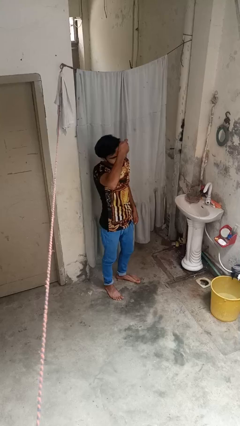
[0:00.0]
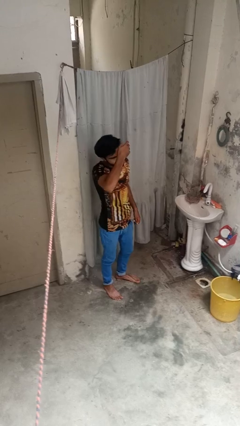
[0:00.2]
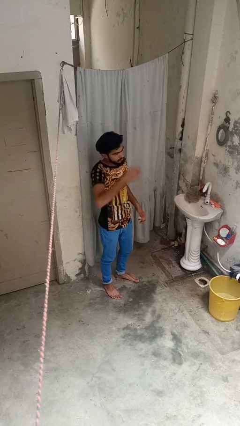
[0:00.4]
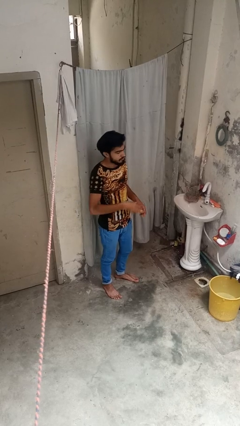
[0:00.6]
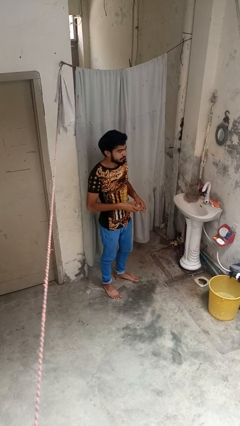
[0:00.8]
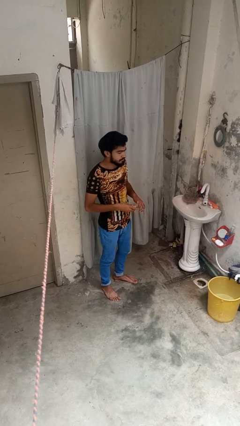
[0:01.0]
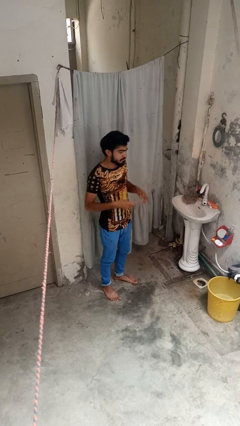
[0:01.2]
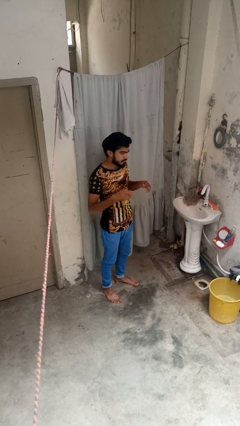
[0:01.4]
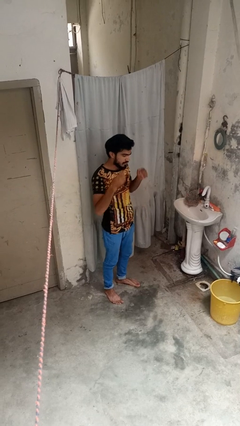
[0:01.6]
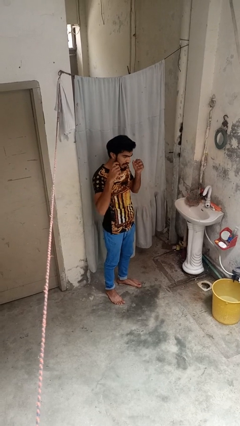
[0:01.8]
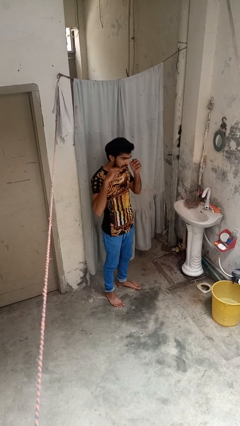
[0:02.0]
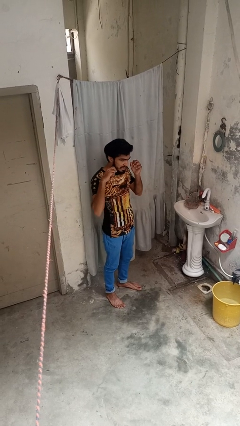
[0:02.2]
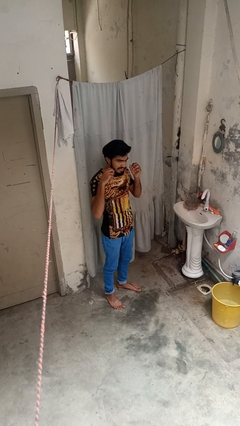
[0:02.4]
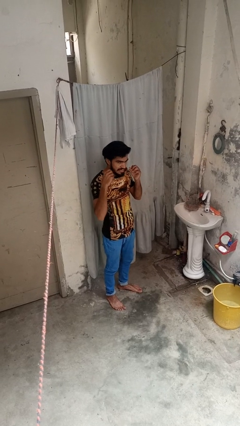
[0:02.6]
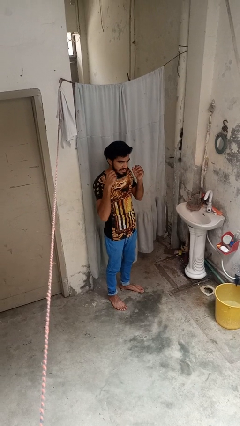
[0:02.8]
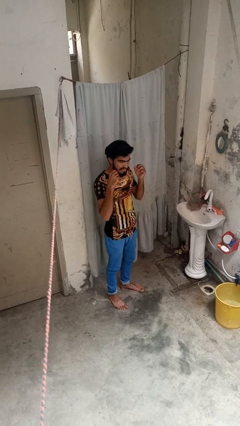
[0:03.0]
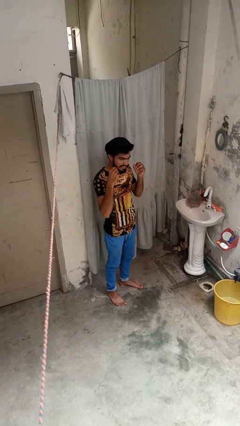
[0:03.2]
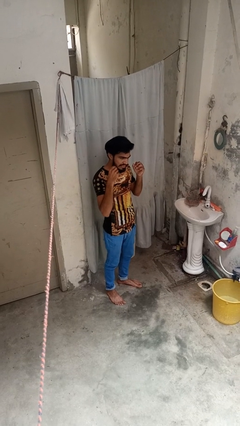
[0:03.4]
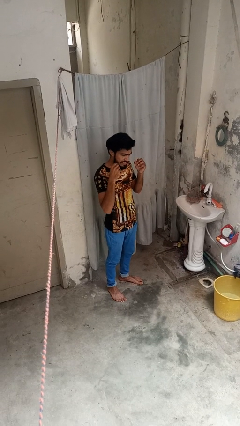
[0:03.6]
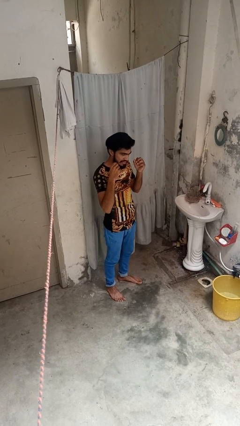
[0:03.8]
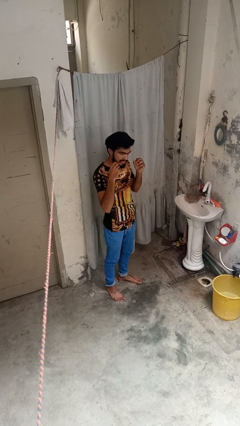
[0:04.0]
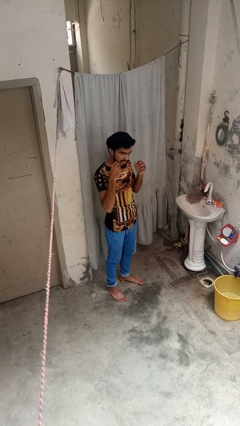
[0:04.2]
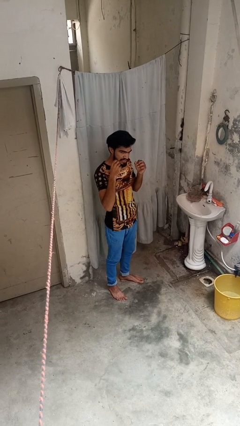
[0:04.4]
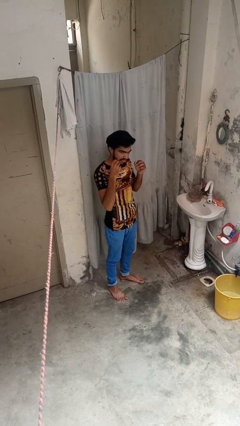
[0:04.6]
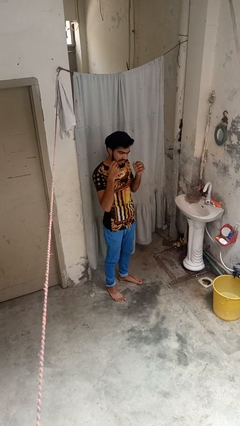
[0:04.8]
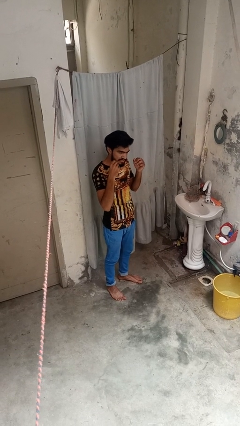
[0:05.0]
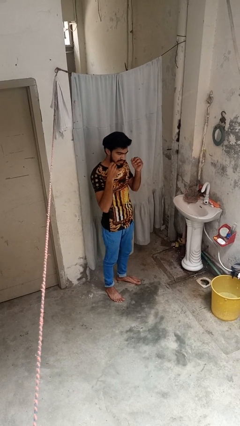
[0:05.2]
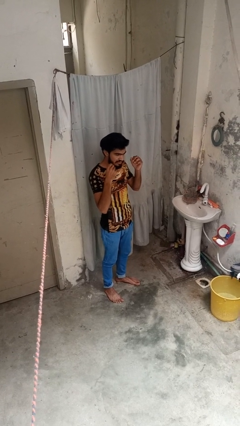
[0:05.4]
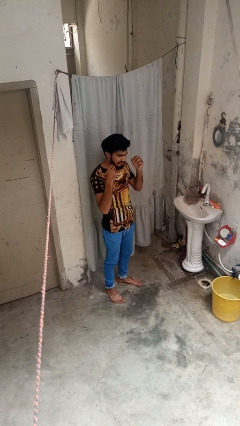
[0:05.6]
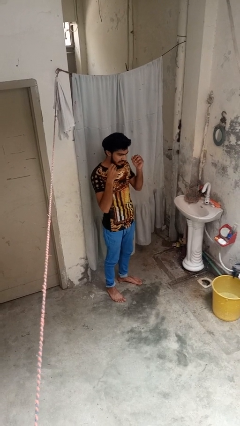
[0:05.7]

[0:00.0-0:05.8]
person flosses

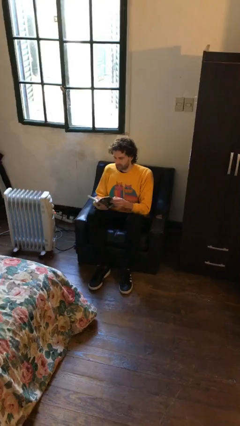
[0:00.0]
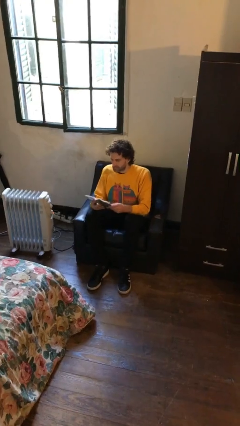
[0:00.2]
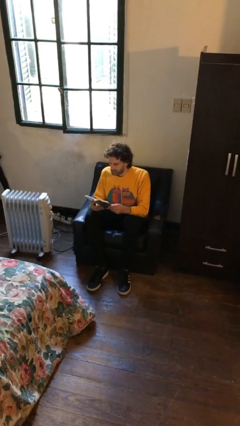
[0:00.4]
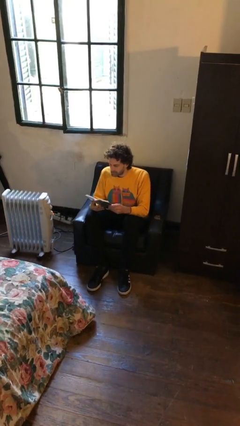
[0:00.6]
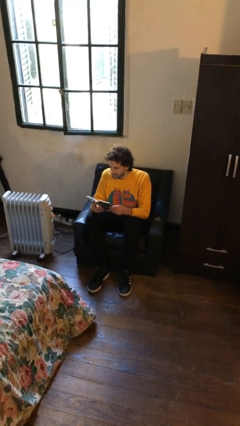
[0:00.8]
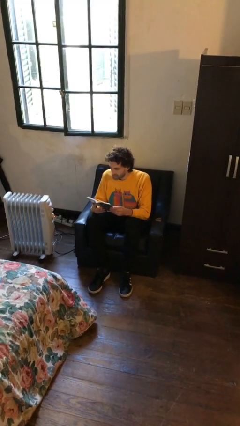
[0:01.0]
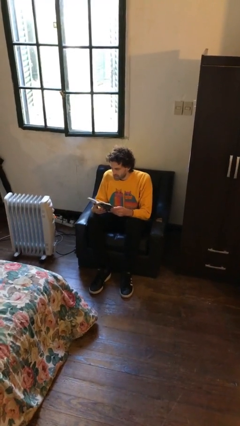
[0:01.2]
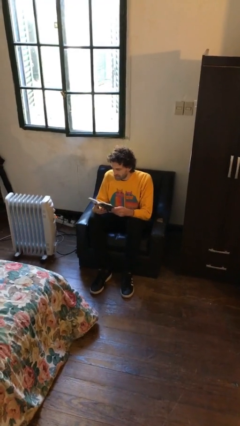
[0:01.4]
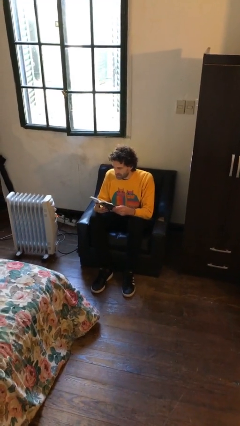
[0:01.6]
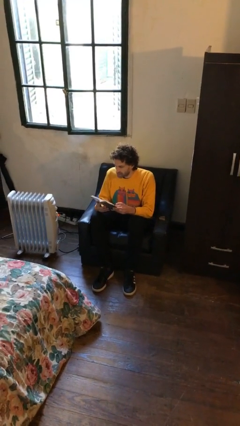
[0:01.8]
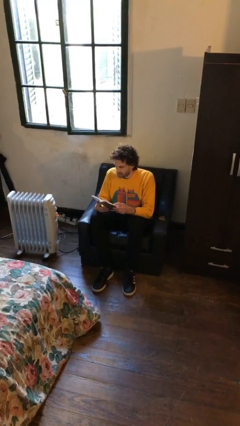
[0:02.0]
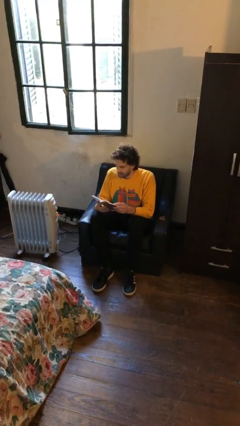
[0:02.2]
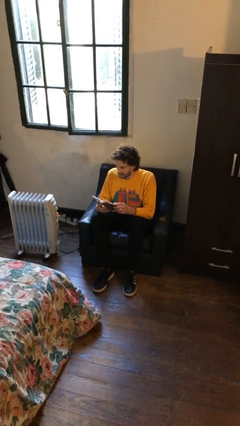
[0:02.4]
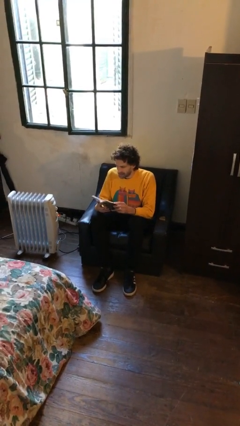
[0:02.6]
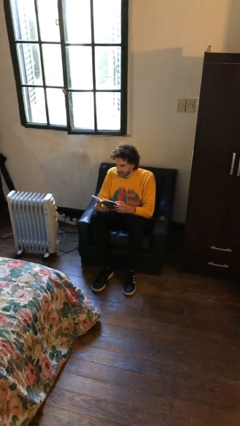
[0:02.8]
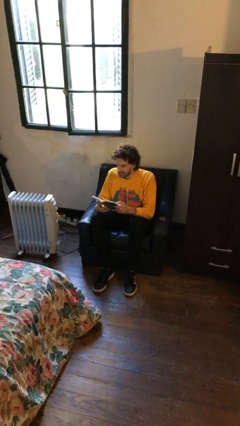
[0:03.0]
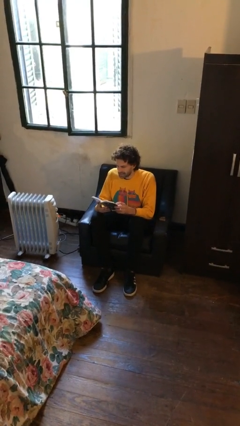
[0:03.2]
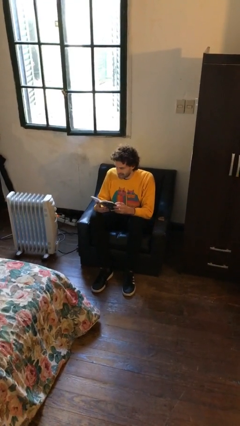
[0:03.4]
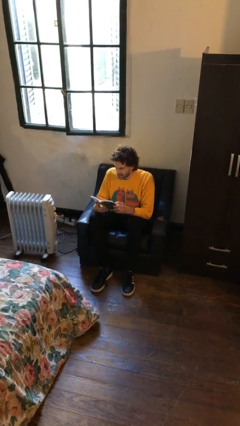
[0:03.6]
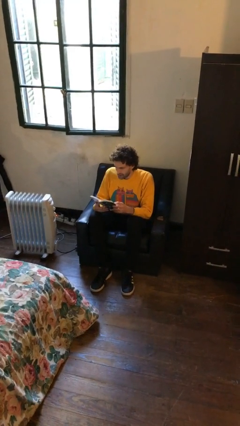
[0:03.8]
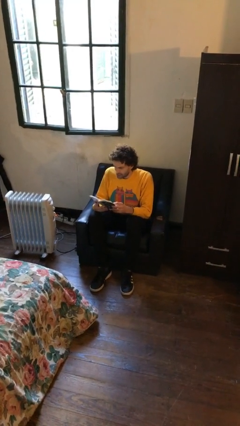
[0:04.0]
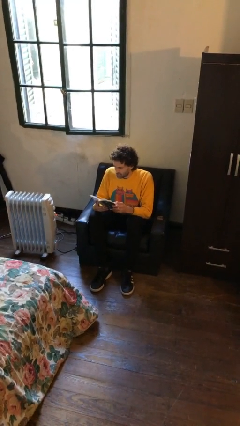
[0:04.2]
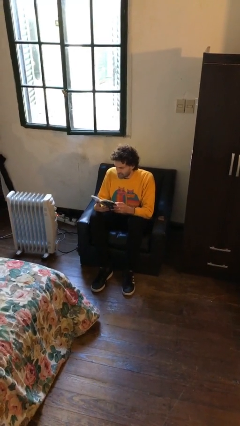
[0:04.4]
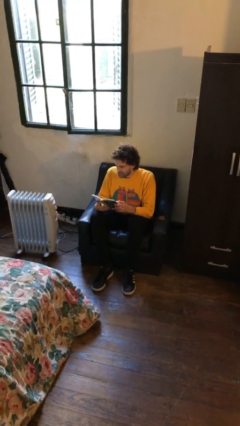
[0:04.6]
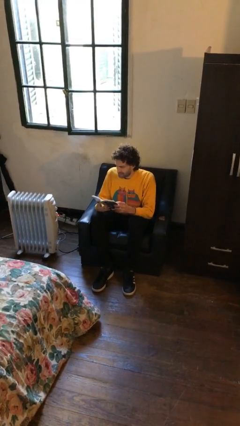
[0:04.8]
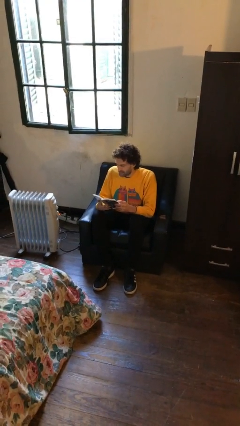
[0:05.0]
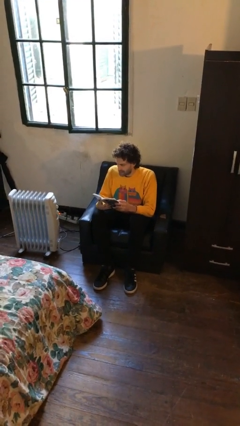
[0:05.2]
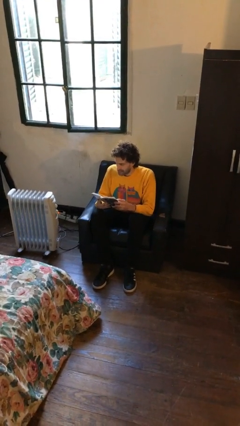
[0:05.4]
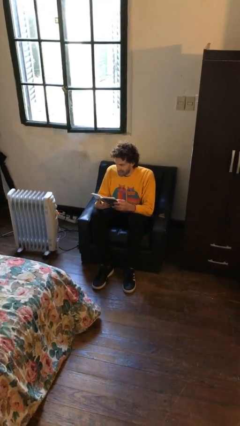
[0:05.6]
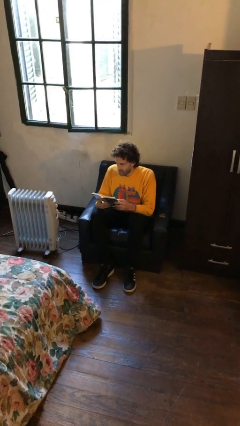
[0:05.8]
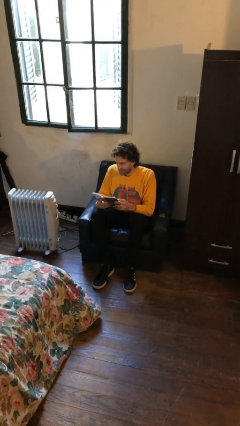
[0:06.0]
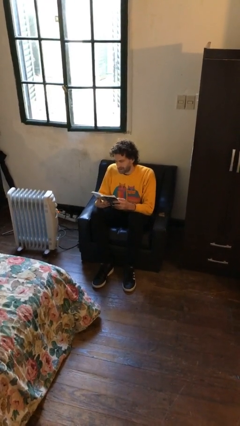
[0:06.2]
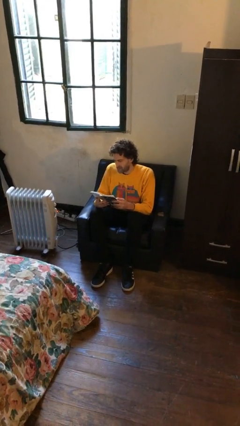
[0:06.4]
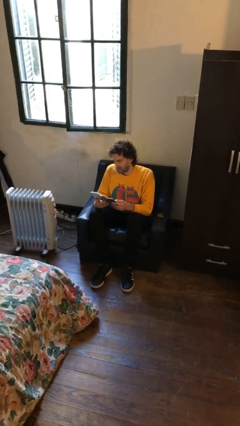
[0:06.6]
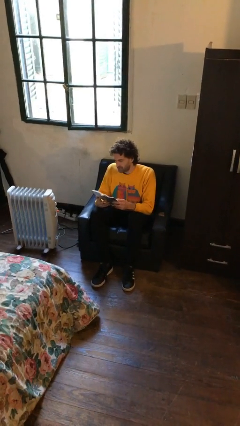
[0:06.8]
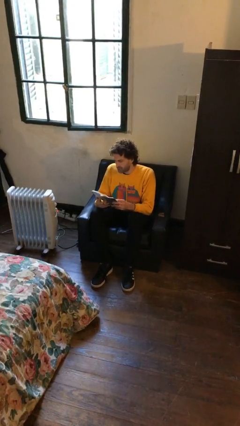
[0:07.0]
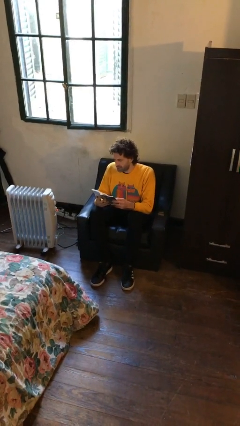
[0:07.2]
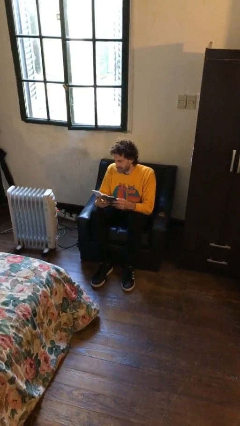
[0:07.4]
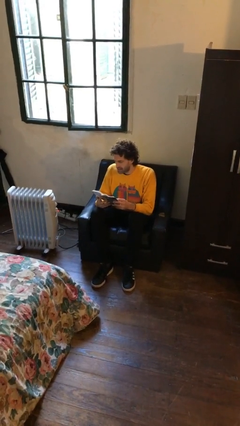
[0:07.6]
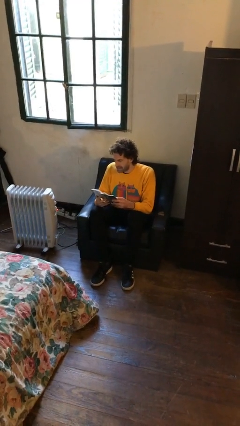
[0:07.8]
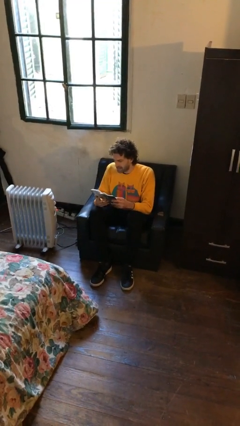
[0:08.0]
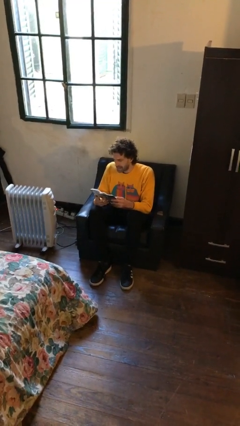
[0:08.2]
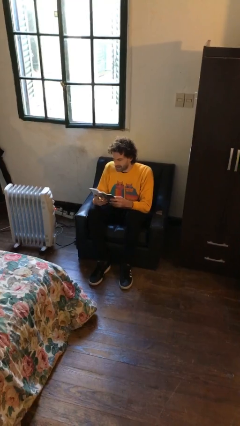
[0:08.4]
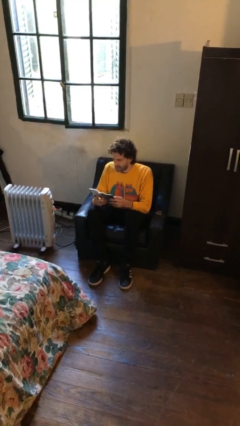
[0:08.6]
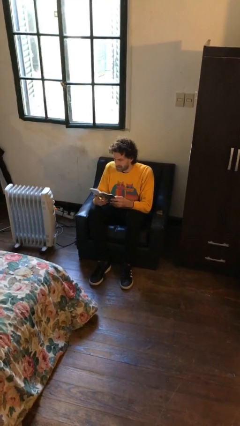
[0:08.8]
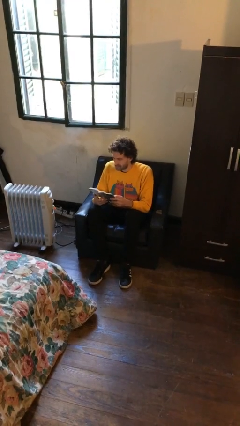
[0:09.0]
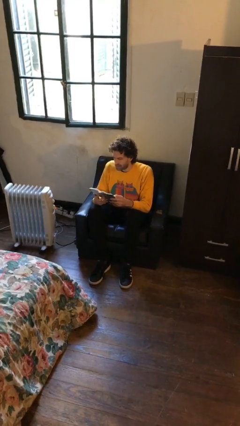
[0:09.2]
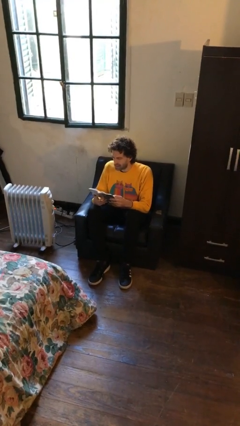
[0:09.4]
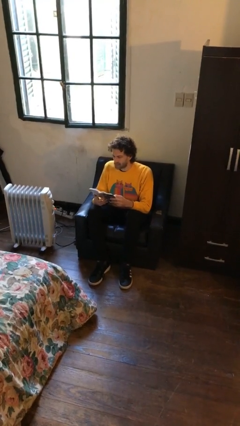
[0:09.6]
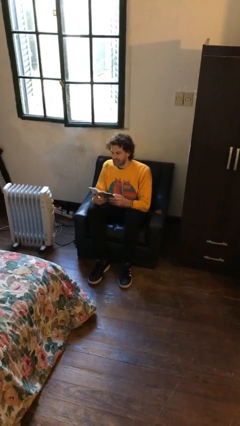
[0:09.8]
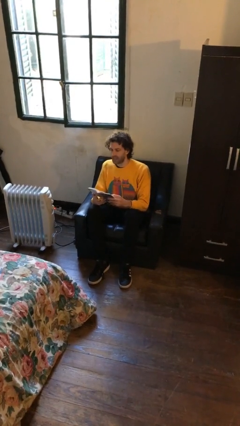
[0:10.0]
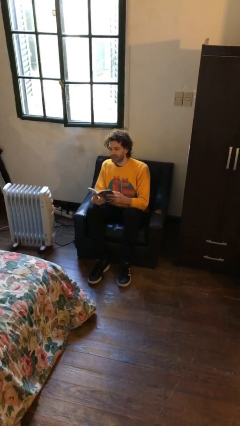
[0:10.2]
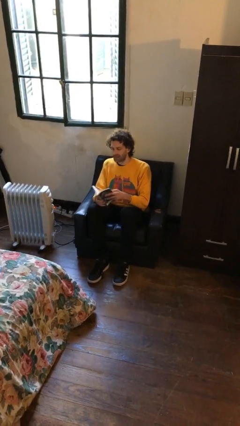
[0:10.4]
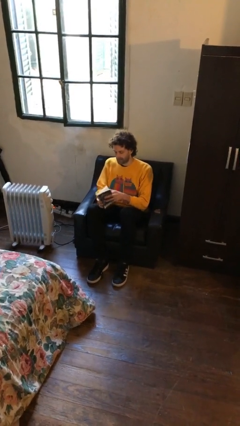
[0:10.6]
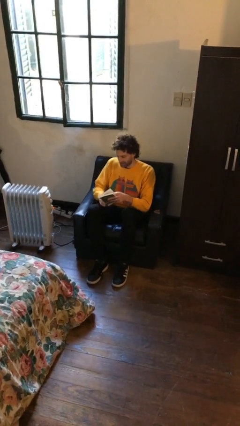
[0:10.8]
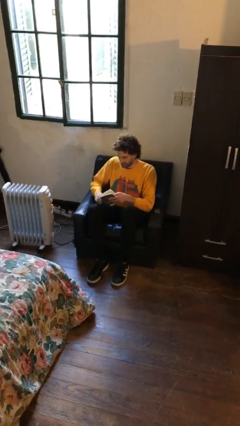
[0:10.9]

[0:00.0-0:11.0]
person reads document

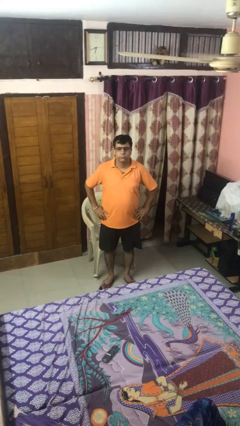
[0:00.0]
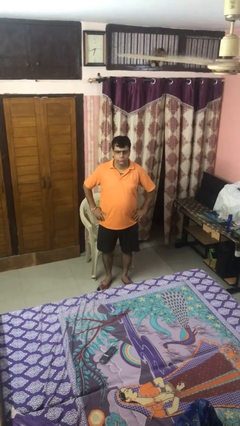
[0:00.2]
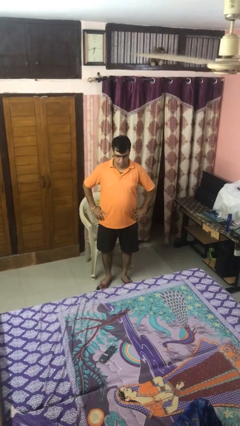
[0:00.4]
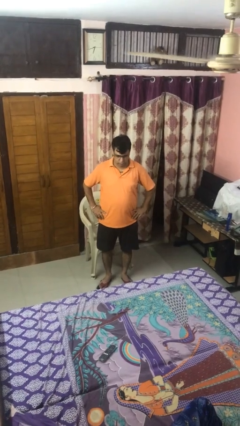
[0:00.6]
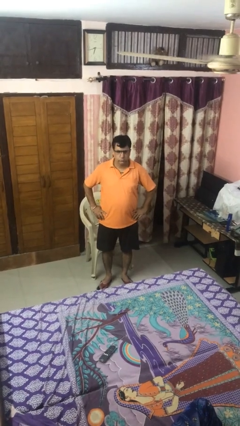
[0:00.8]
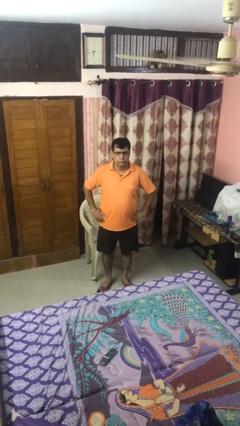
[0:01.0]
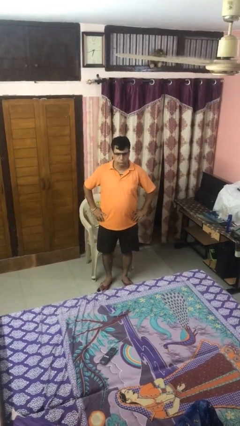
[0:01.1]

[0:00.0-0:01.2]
person nods head

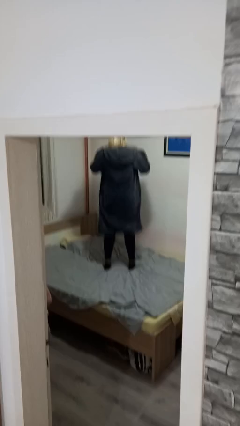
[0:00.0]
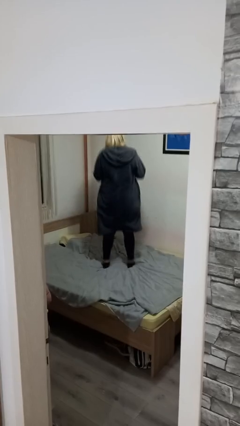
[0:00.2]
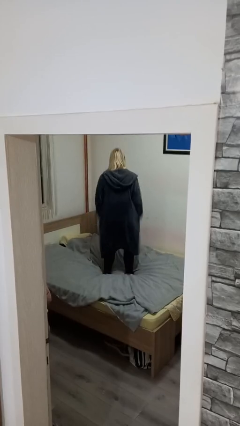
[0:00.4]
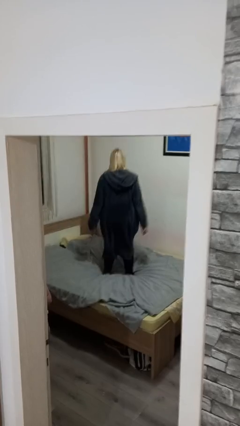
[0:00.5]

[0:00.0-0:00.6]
person jumps on bed
